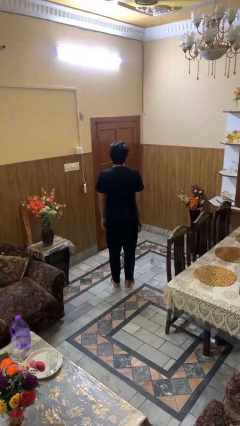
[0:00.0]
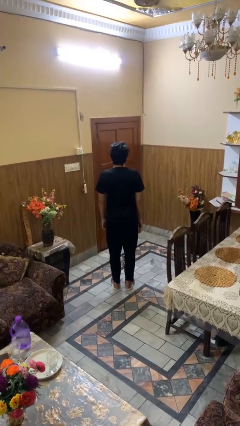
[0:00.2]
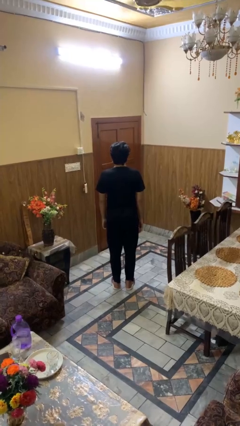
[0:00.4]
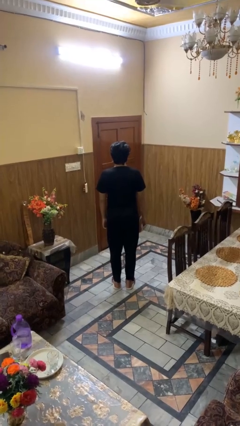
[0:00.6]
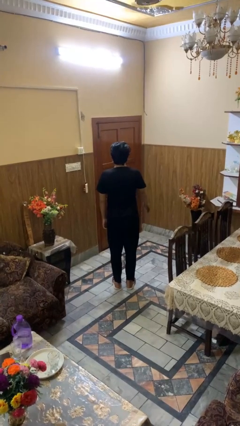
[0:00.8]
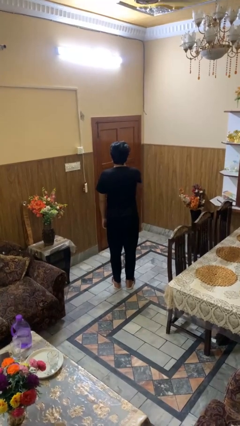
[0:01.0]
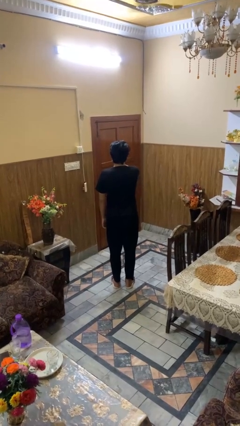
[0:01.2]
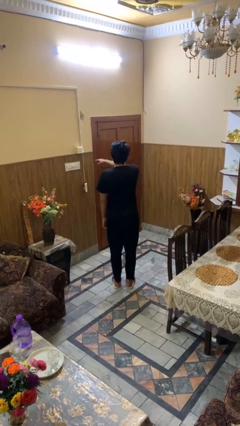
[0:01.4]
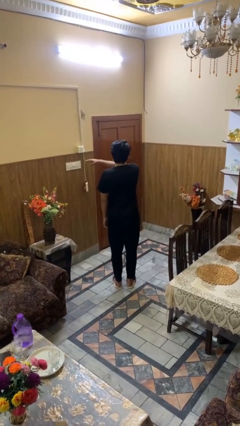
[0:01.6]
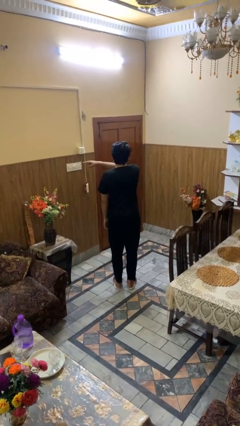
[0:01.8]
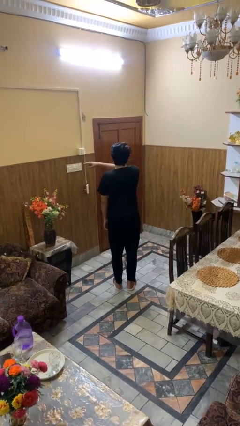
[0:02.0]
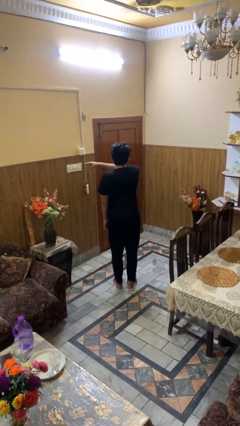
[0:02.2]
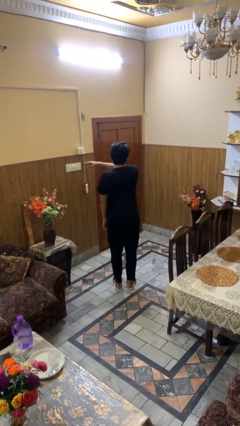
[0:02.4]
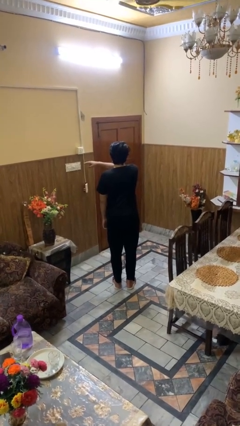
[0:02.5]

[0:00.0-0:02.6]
person gestures swipe left

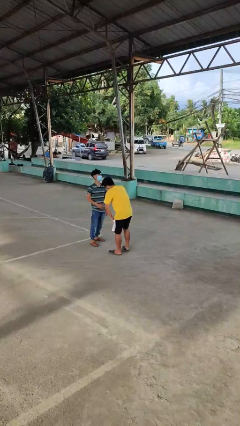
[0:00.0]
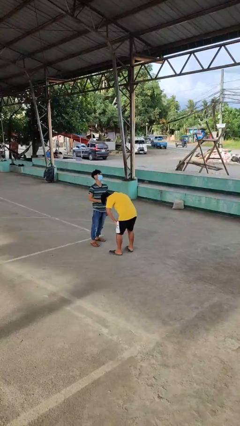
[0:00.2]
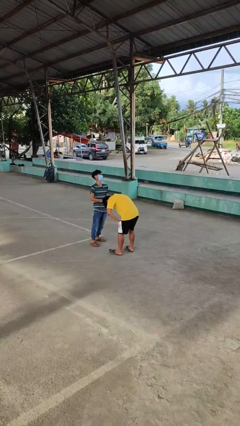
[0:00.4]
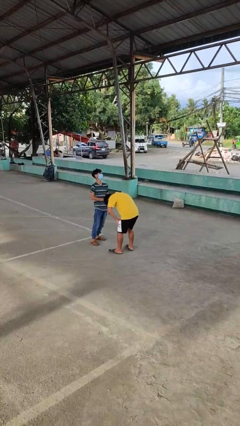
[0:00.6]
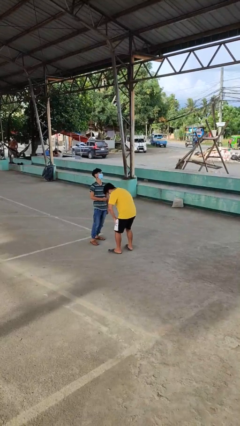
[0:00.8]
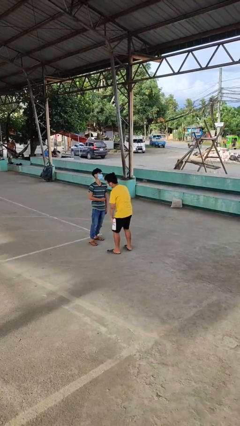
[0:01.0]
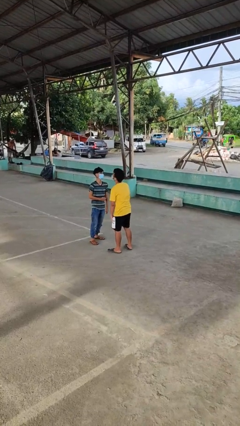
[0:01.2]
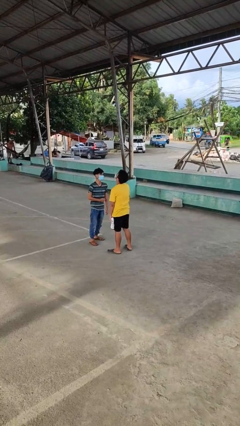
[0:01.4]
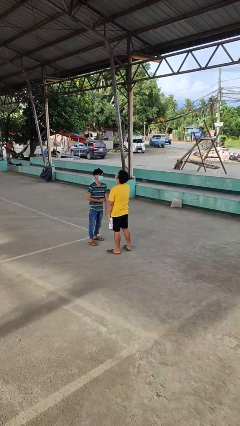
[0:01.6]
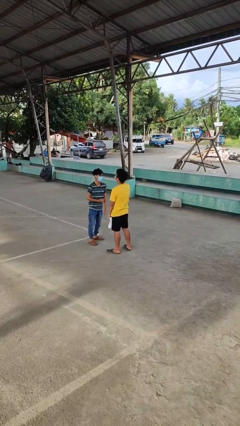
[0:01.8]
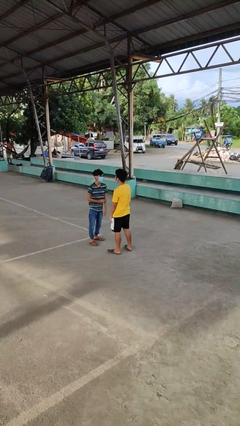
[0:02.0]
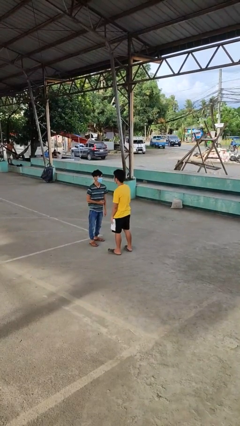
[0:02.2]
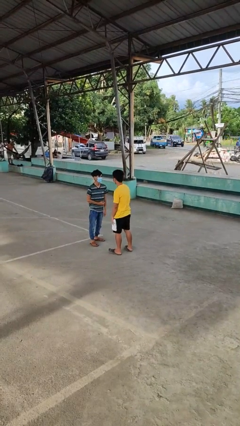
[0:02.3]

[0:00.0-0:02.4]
person laughs with person

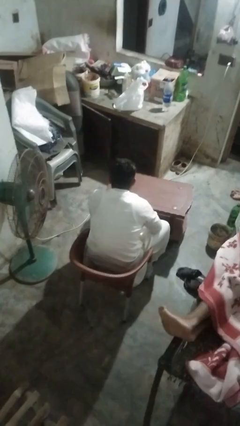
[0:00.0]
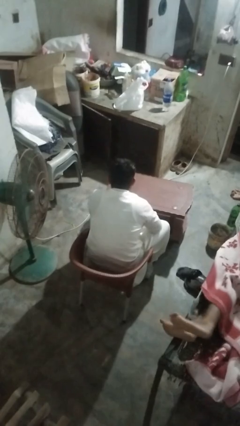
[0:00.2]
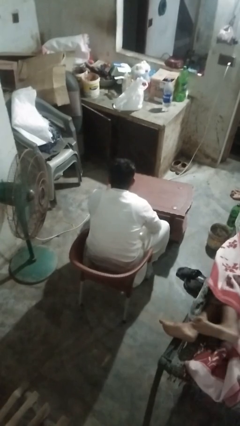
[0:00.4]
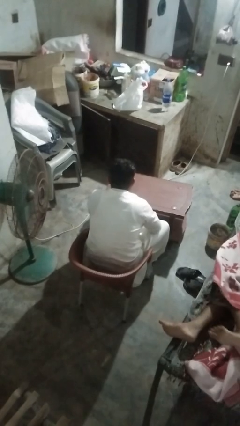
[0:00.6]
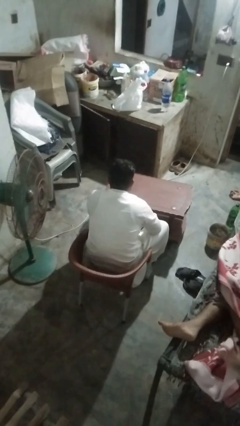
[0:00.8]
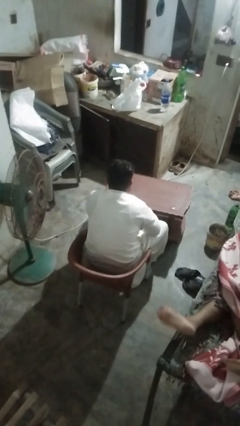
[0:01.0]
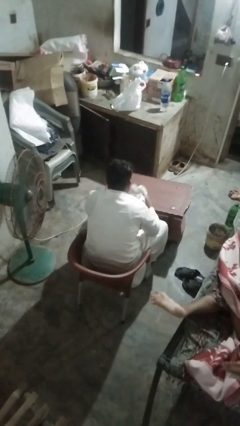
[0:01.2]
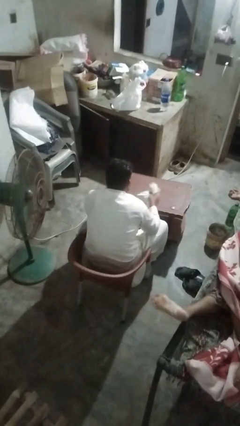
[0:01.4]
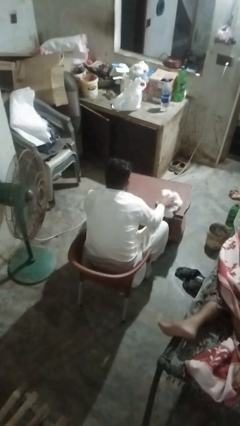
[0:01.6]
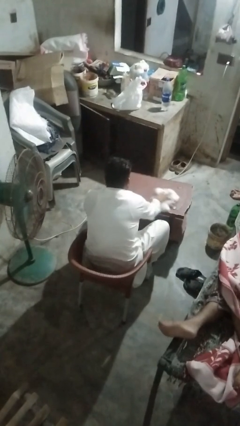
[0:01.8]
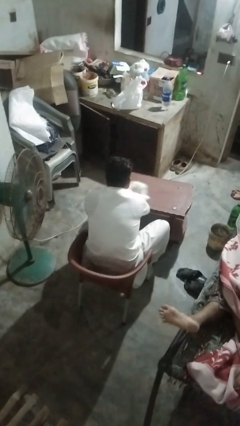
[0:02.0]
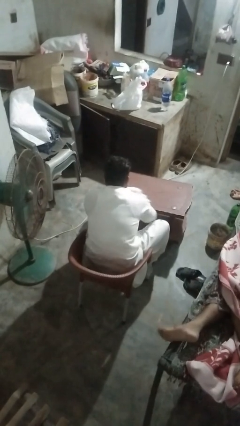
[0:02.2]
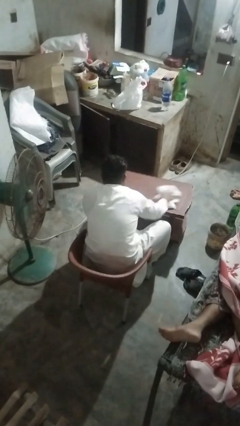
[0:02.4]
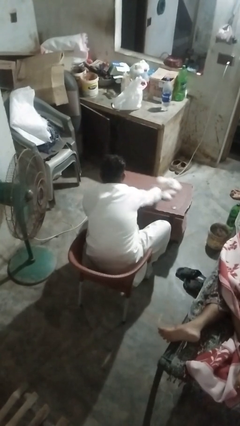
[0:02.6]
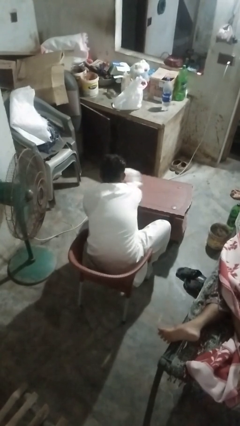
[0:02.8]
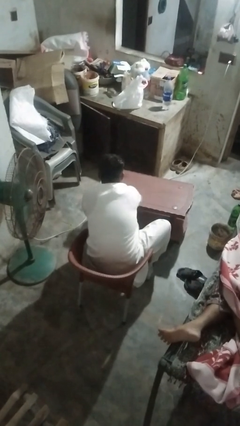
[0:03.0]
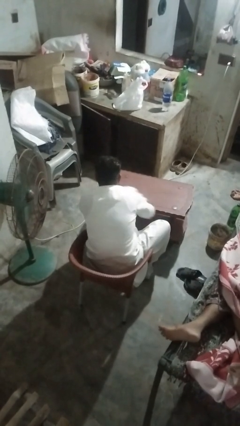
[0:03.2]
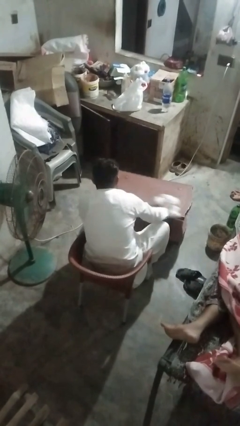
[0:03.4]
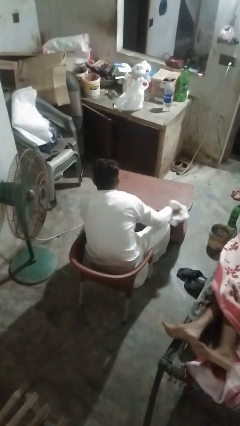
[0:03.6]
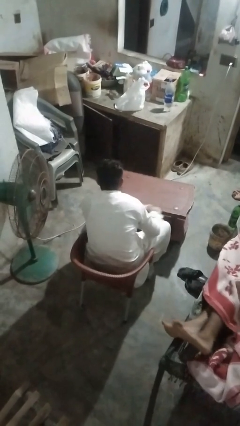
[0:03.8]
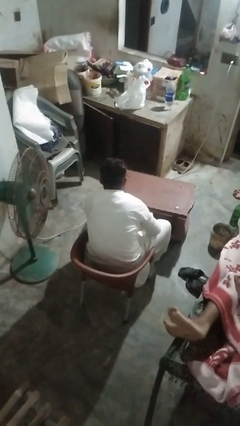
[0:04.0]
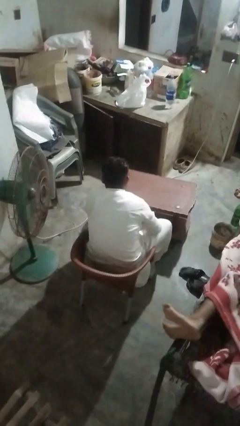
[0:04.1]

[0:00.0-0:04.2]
person cleans table with rag

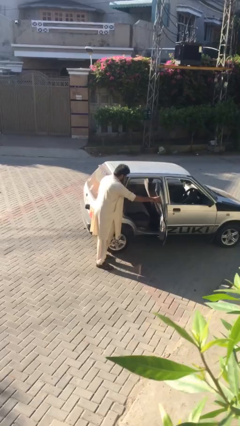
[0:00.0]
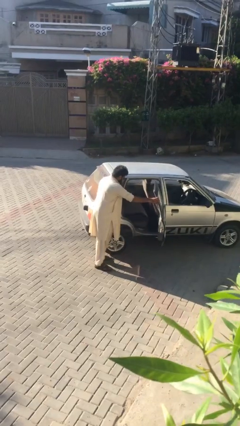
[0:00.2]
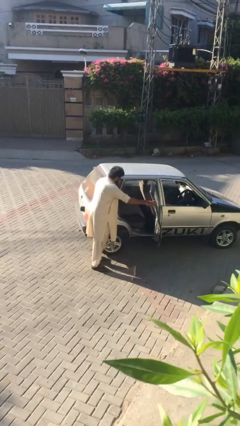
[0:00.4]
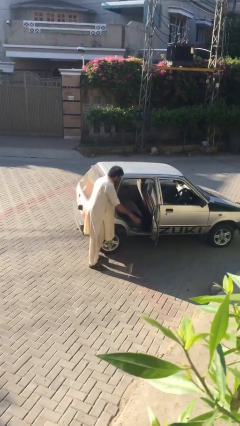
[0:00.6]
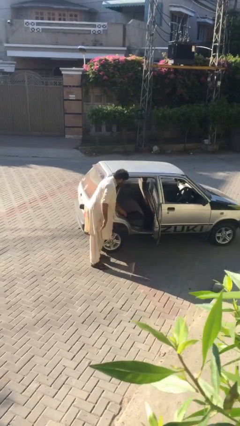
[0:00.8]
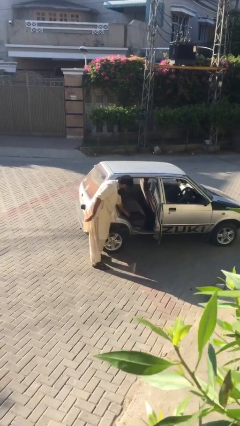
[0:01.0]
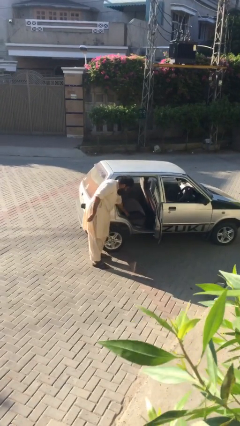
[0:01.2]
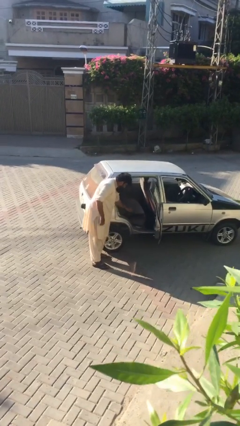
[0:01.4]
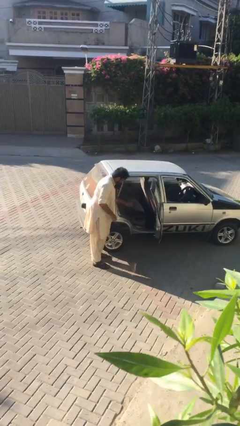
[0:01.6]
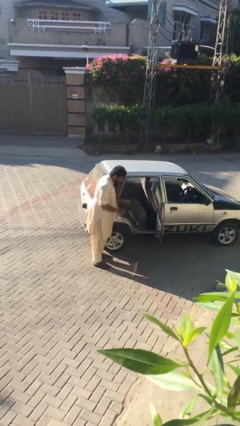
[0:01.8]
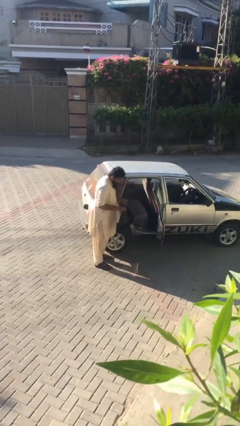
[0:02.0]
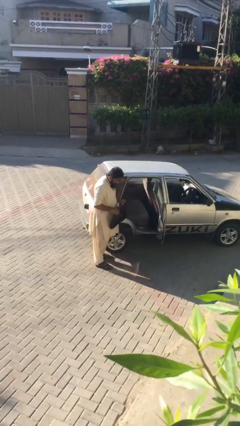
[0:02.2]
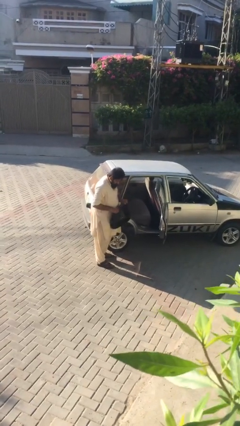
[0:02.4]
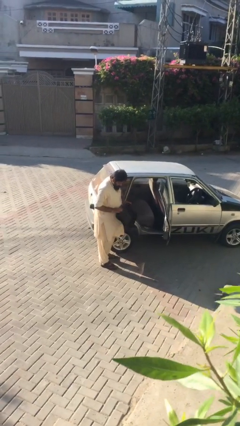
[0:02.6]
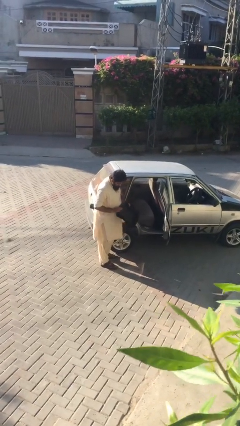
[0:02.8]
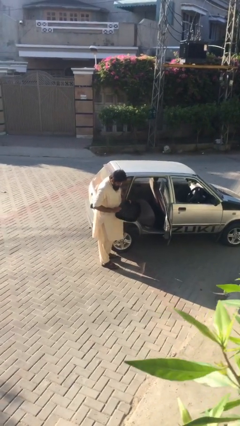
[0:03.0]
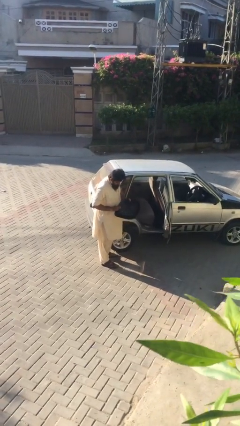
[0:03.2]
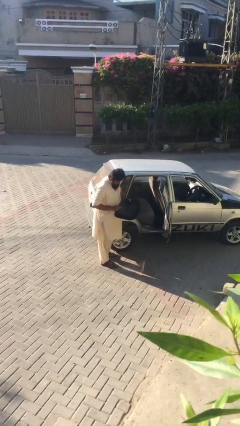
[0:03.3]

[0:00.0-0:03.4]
person unloads car

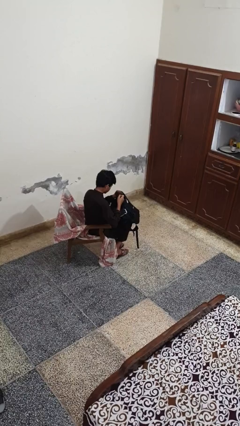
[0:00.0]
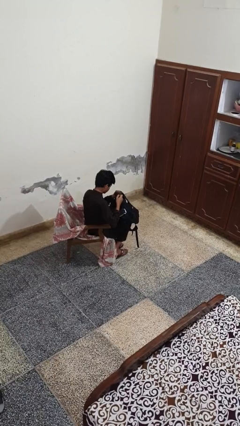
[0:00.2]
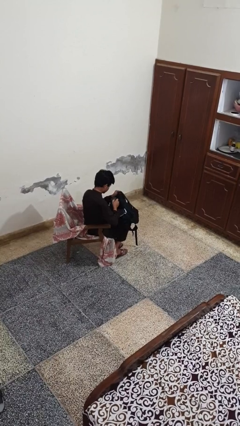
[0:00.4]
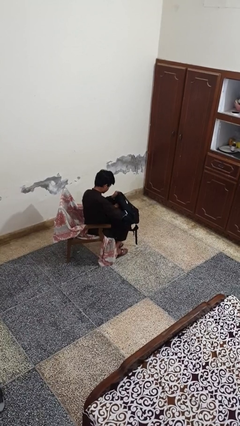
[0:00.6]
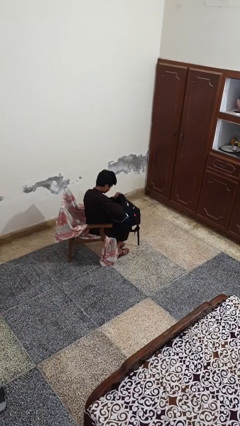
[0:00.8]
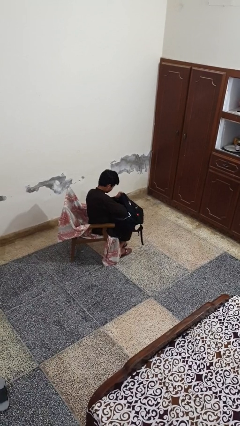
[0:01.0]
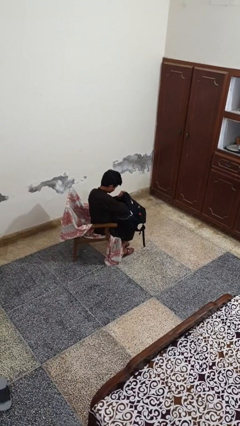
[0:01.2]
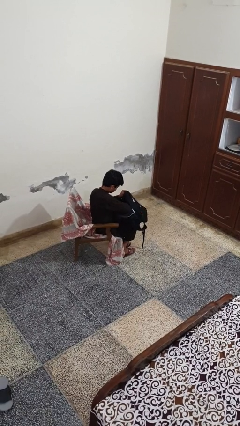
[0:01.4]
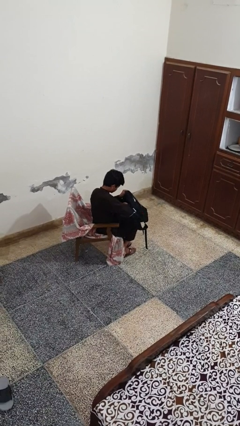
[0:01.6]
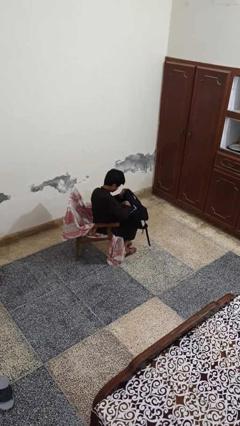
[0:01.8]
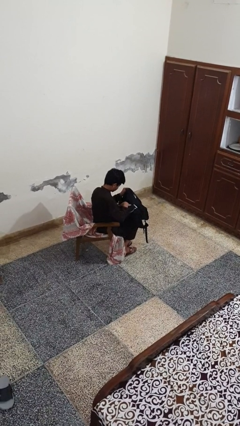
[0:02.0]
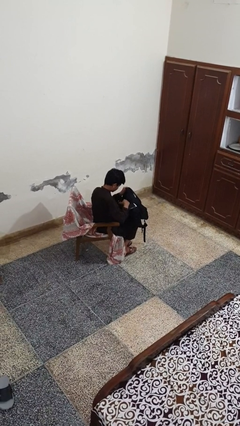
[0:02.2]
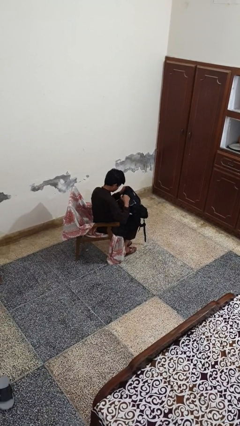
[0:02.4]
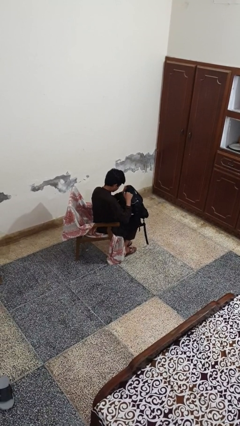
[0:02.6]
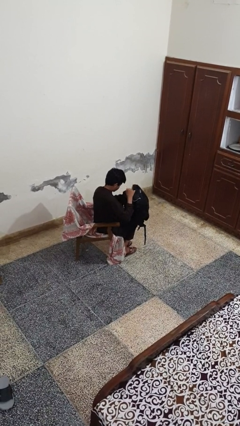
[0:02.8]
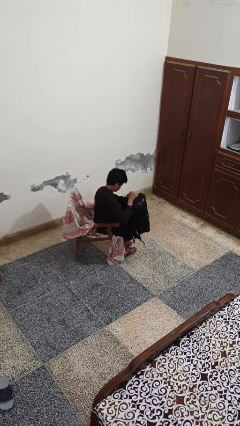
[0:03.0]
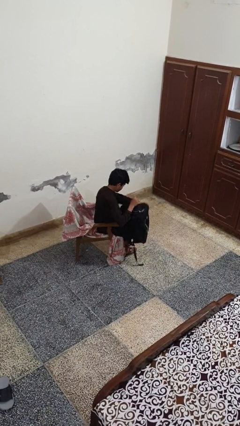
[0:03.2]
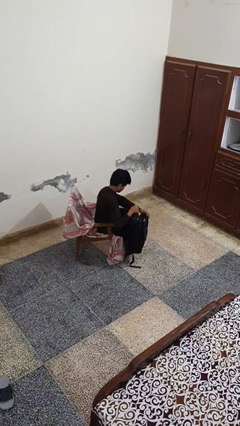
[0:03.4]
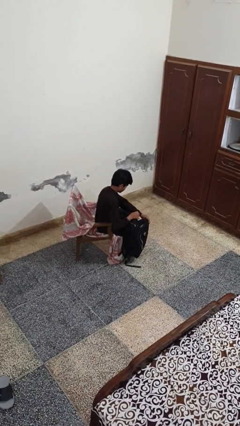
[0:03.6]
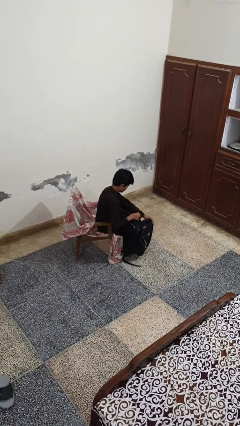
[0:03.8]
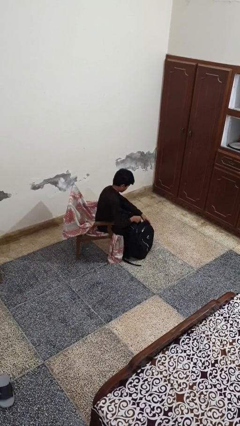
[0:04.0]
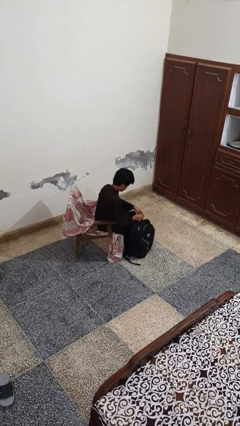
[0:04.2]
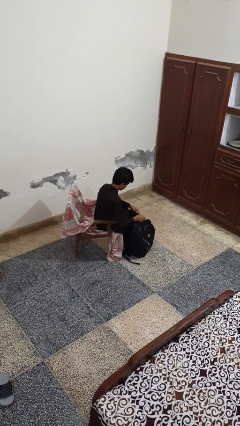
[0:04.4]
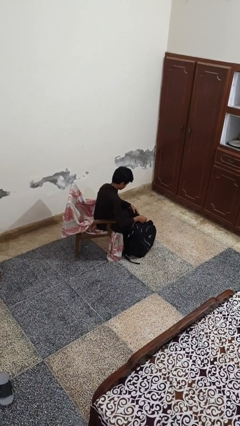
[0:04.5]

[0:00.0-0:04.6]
person puts object into backpack

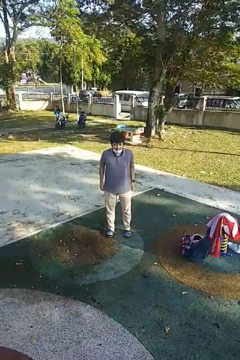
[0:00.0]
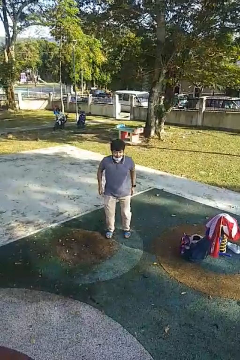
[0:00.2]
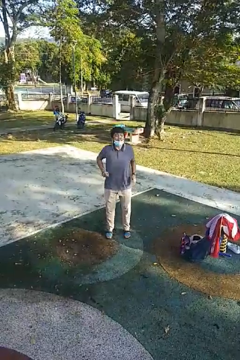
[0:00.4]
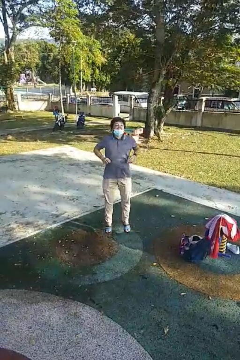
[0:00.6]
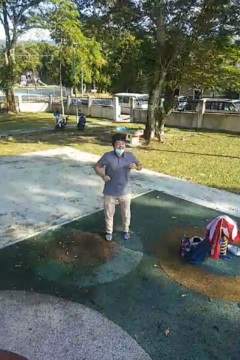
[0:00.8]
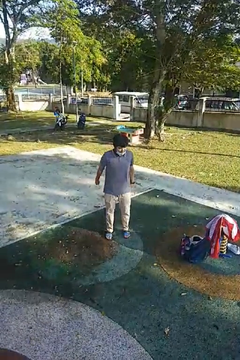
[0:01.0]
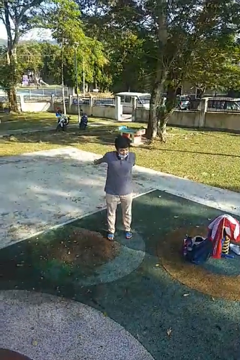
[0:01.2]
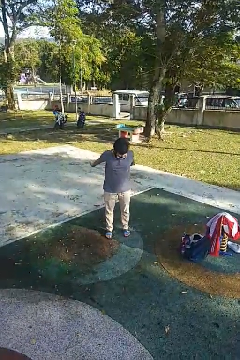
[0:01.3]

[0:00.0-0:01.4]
person jumps
